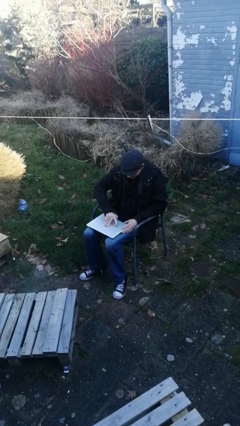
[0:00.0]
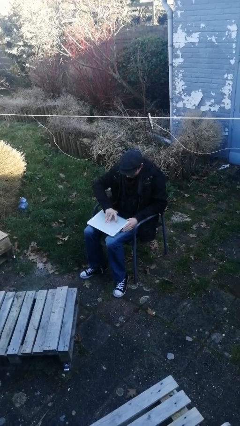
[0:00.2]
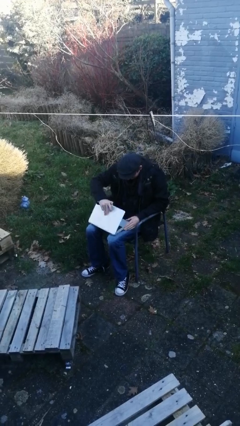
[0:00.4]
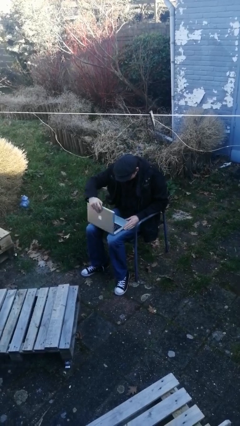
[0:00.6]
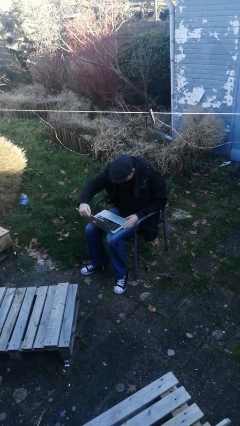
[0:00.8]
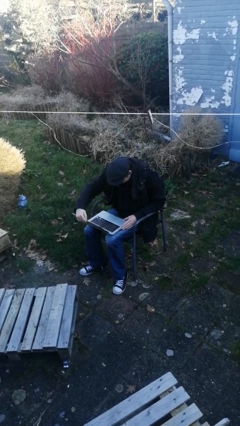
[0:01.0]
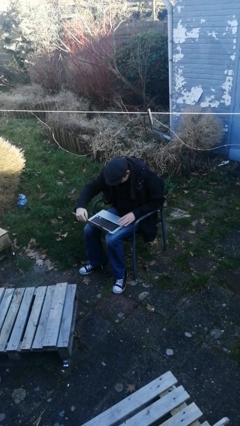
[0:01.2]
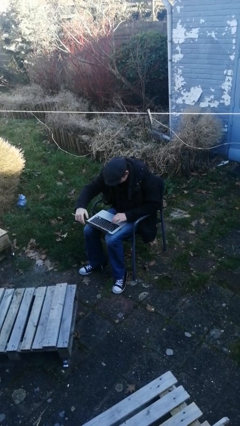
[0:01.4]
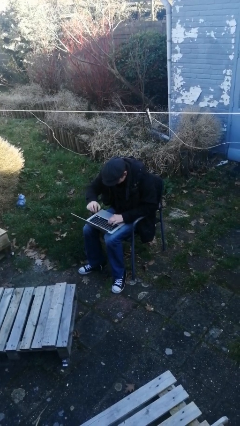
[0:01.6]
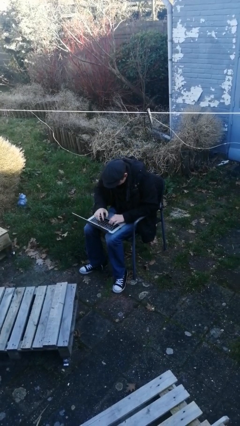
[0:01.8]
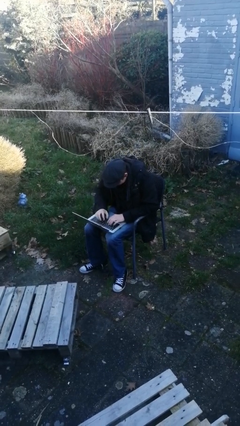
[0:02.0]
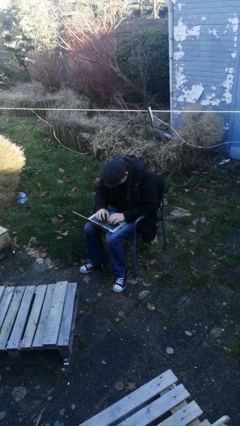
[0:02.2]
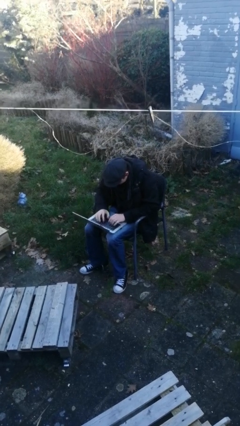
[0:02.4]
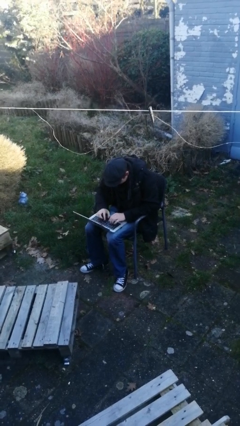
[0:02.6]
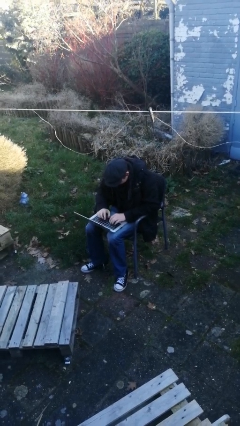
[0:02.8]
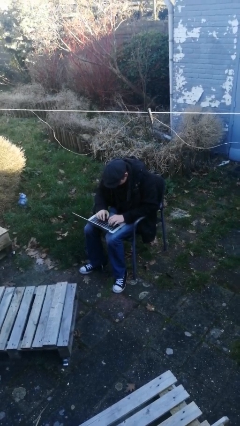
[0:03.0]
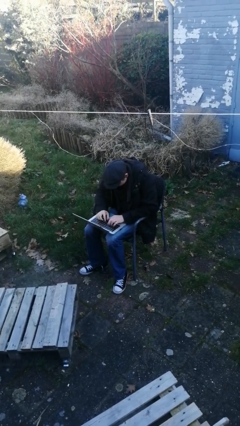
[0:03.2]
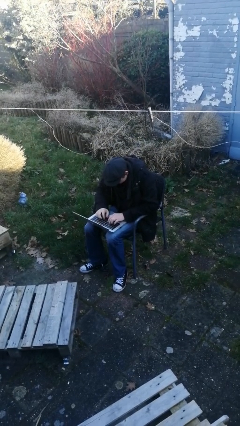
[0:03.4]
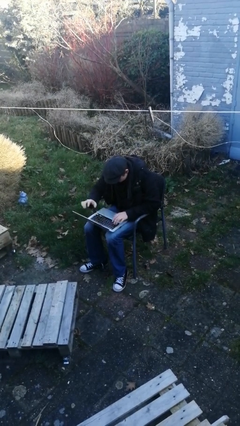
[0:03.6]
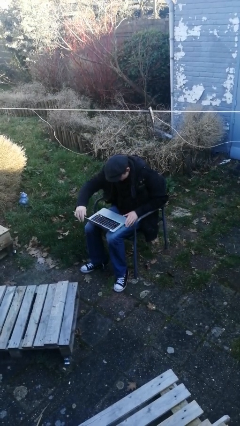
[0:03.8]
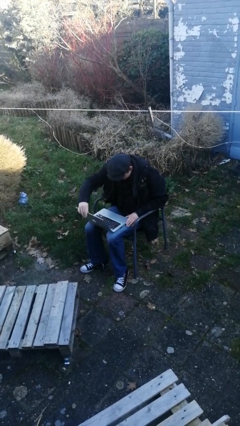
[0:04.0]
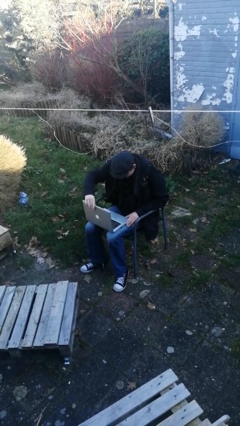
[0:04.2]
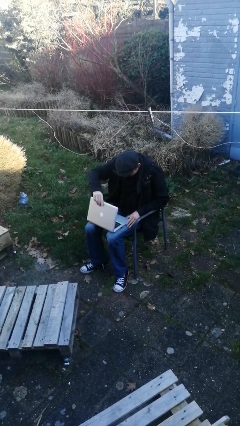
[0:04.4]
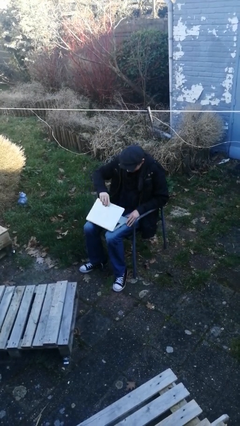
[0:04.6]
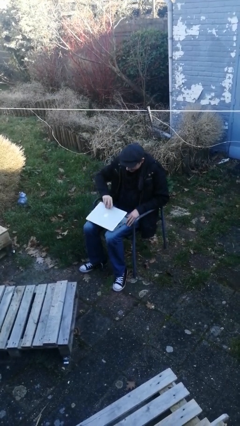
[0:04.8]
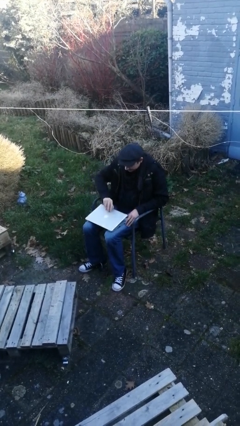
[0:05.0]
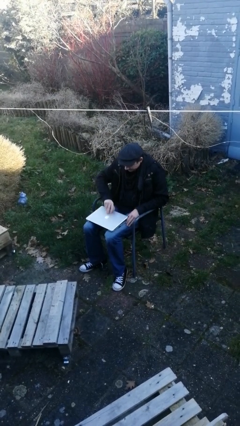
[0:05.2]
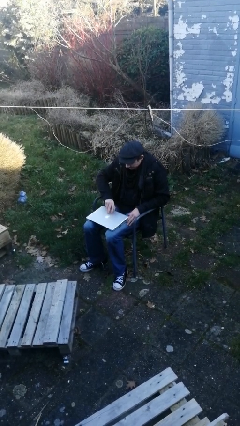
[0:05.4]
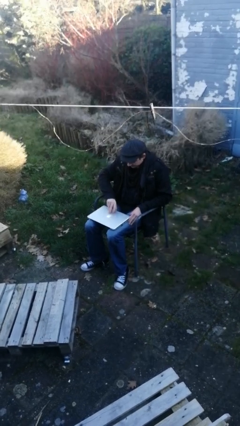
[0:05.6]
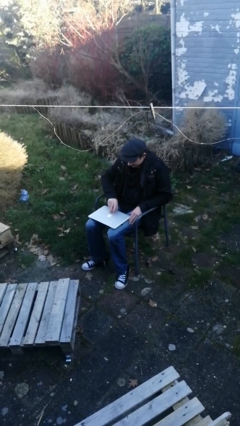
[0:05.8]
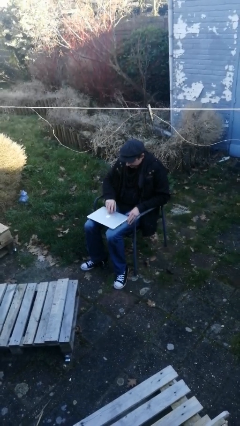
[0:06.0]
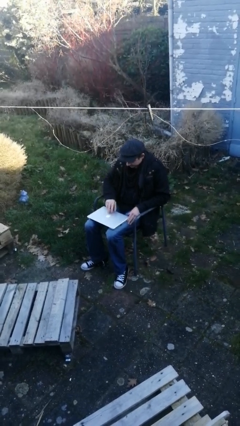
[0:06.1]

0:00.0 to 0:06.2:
person interacts with laptop

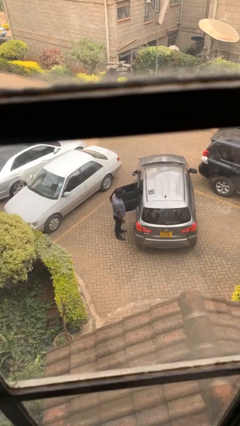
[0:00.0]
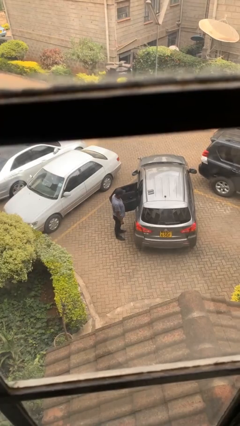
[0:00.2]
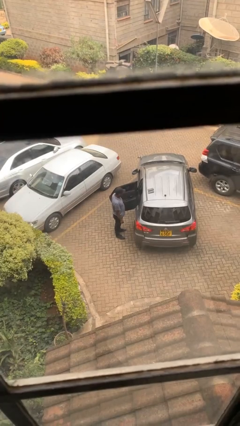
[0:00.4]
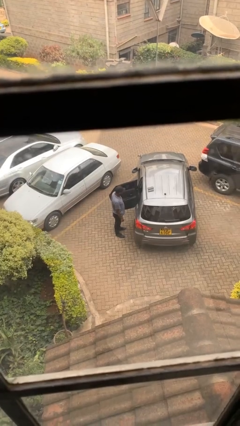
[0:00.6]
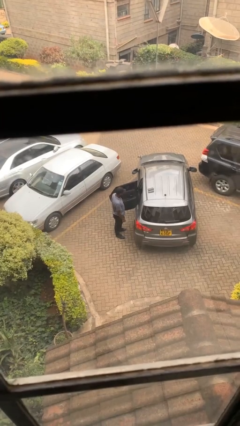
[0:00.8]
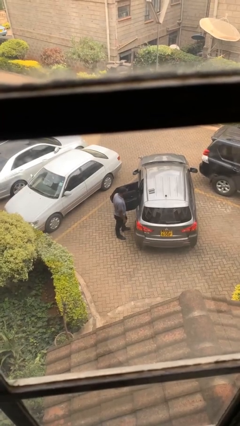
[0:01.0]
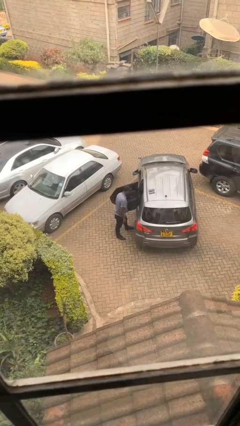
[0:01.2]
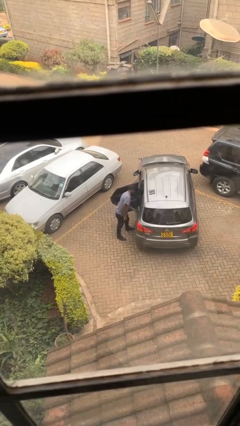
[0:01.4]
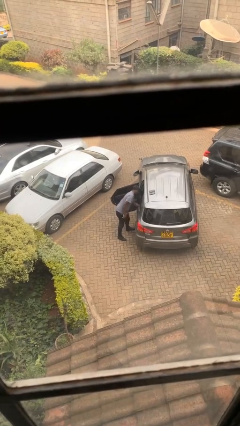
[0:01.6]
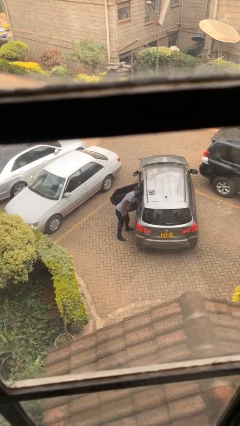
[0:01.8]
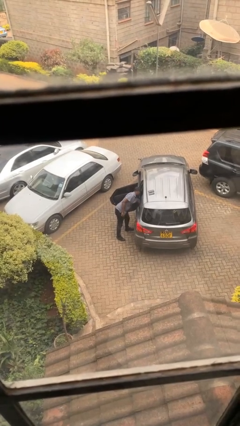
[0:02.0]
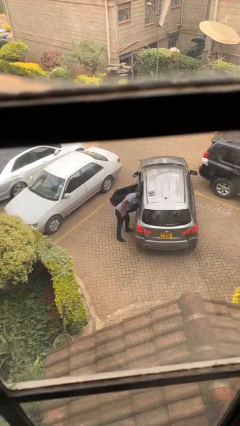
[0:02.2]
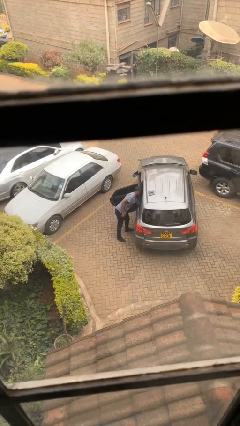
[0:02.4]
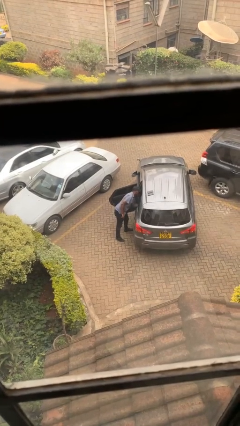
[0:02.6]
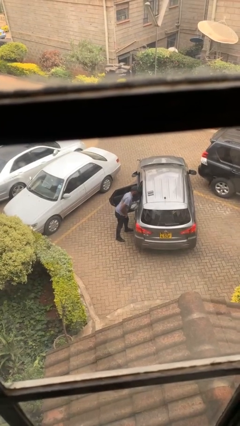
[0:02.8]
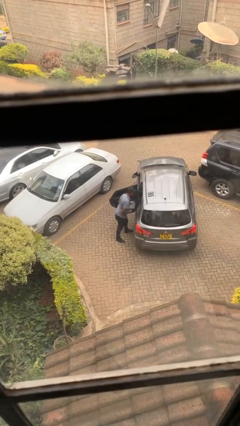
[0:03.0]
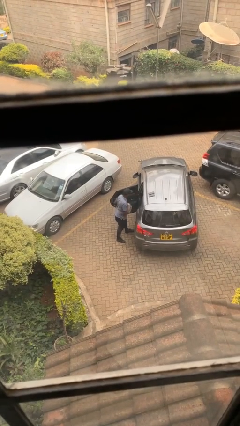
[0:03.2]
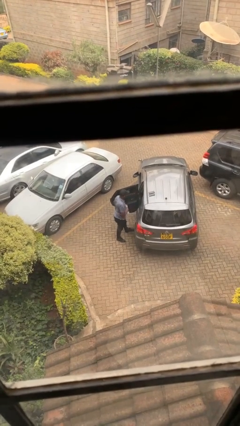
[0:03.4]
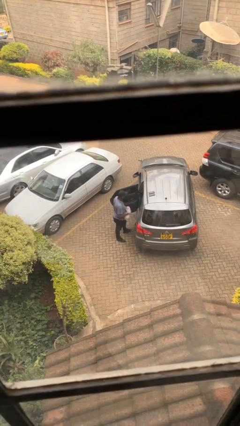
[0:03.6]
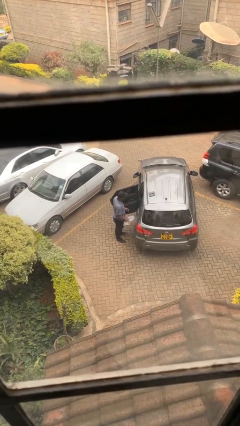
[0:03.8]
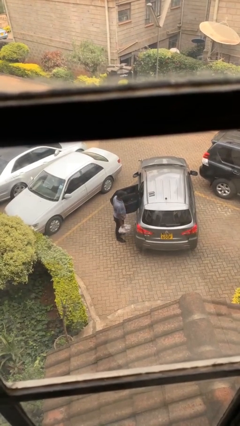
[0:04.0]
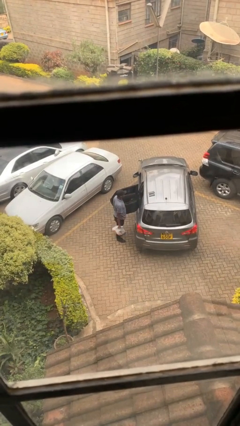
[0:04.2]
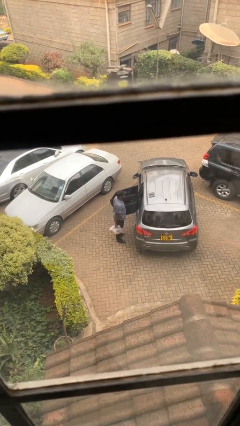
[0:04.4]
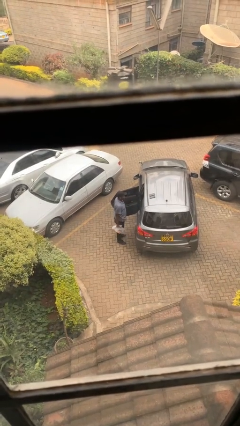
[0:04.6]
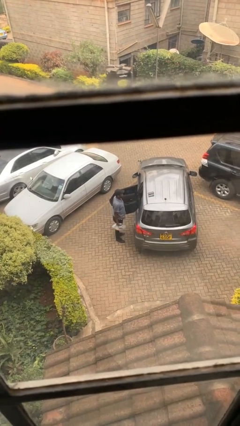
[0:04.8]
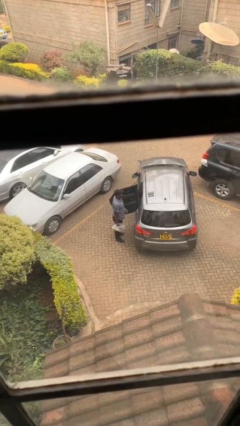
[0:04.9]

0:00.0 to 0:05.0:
person unloads car

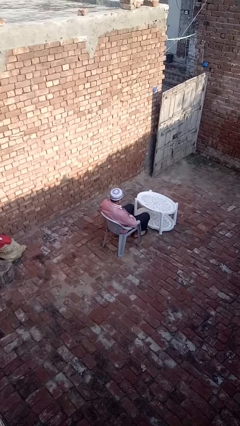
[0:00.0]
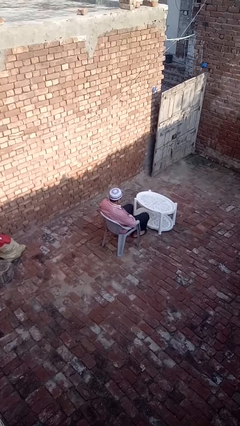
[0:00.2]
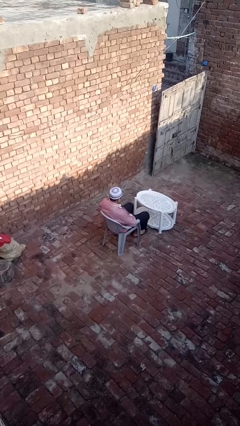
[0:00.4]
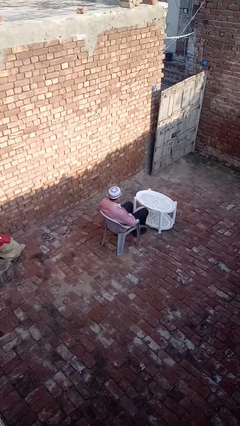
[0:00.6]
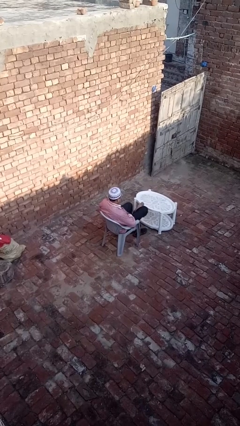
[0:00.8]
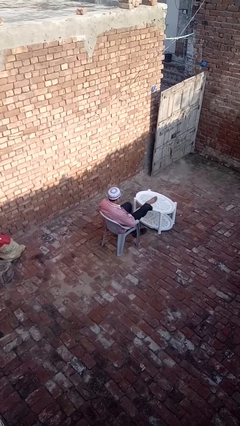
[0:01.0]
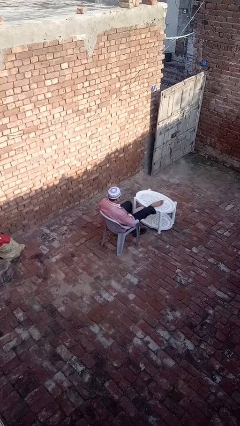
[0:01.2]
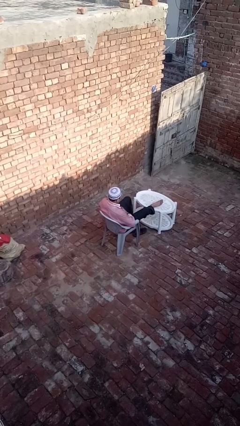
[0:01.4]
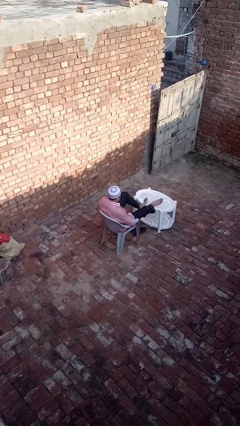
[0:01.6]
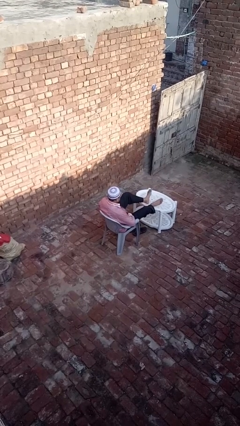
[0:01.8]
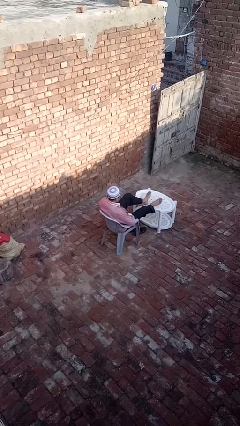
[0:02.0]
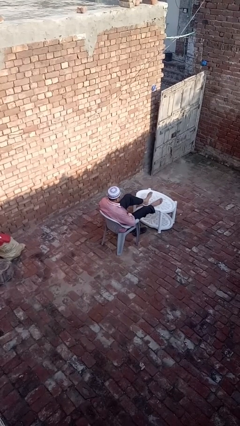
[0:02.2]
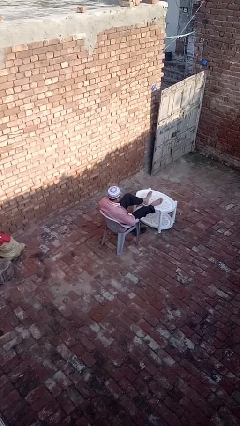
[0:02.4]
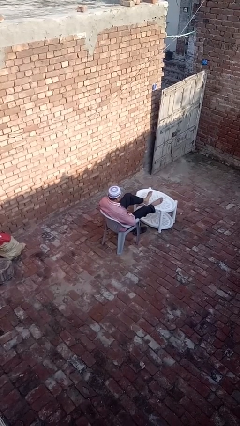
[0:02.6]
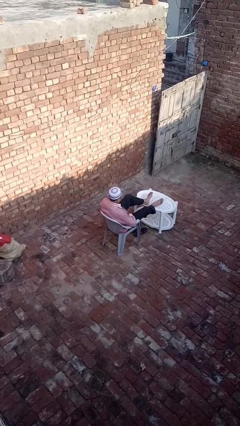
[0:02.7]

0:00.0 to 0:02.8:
person puts feet up

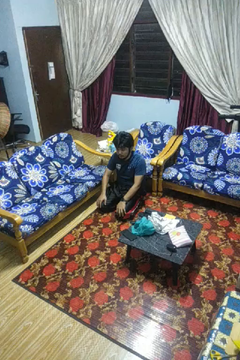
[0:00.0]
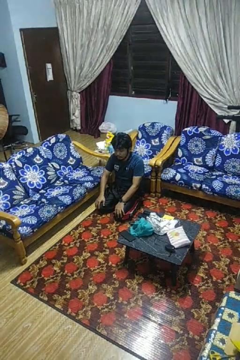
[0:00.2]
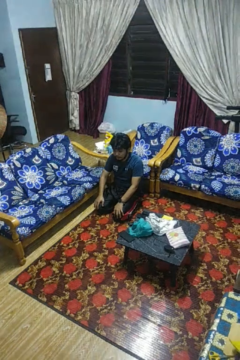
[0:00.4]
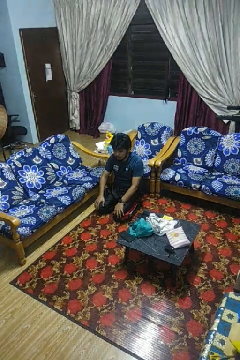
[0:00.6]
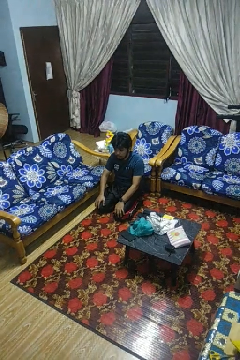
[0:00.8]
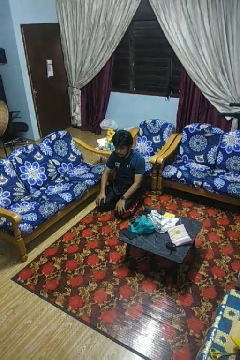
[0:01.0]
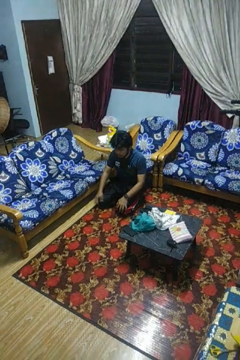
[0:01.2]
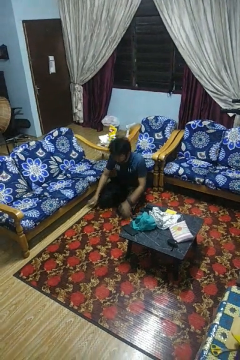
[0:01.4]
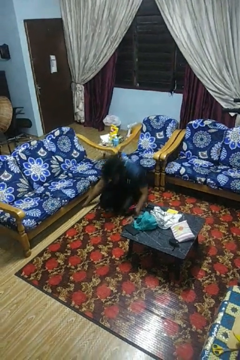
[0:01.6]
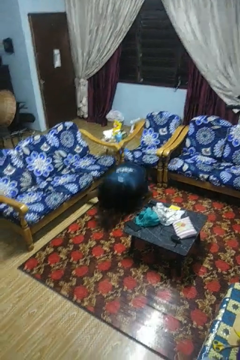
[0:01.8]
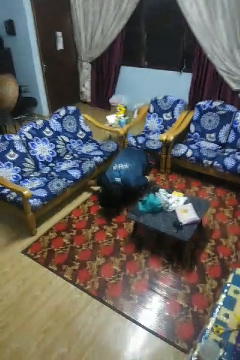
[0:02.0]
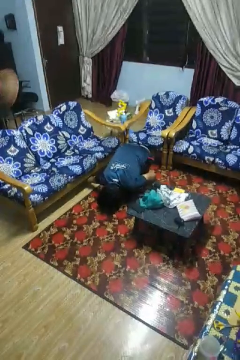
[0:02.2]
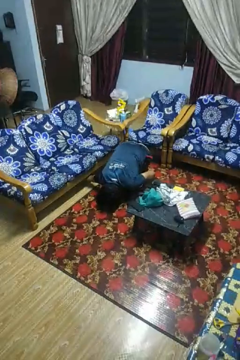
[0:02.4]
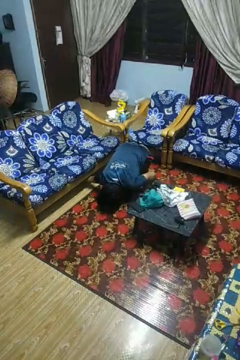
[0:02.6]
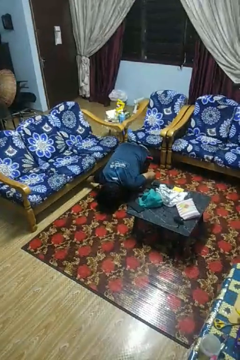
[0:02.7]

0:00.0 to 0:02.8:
person searches under couch

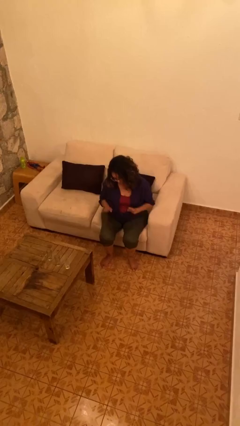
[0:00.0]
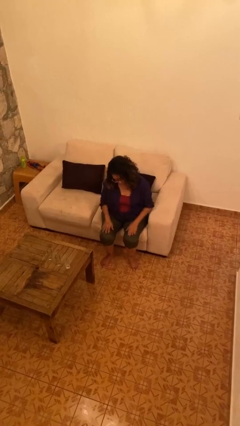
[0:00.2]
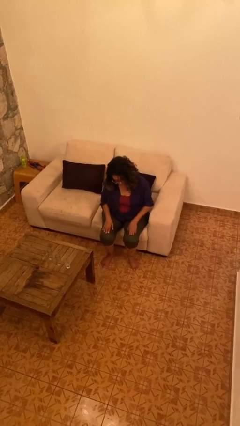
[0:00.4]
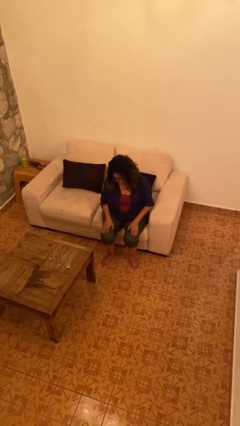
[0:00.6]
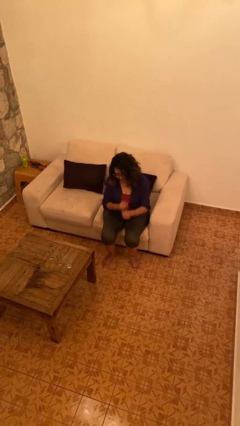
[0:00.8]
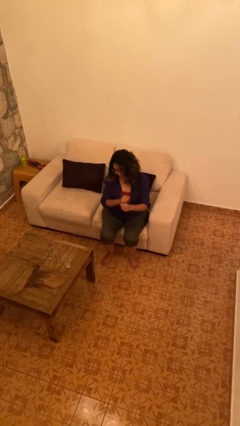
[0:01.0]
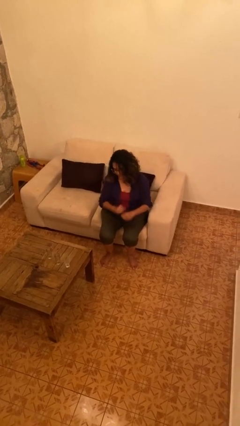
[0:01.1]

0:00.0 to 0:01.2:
person slaps hands on thighs

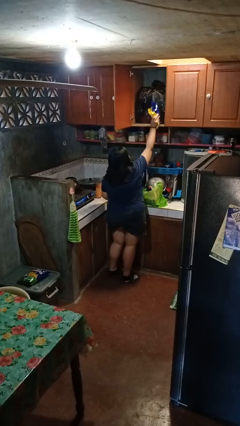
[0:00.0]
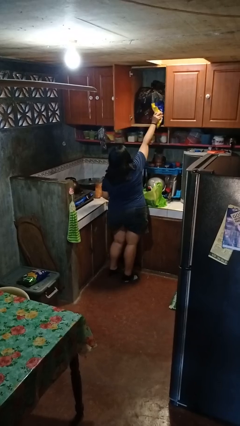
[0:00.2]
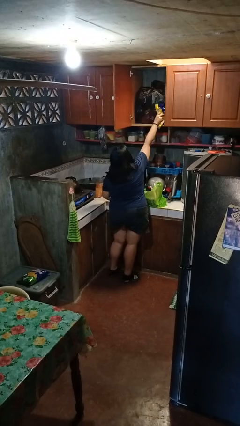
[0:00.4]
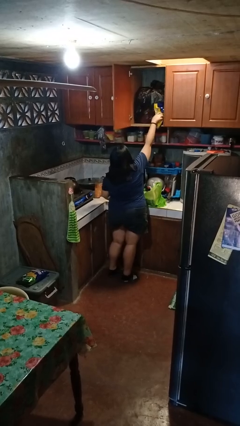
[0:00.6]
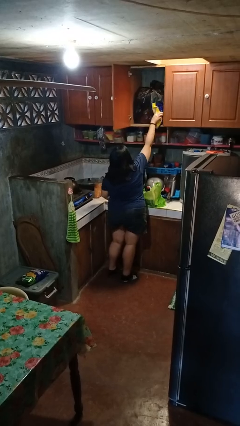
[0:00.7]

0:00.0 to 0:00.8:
person loads groceries into cabinet
